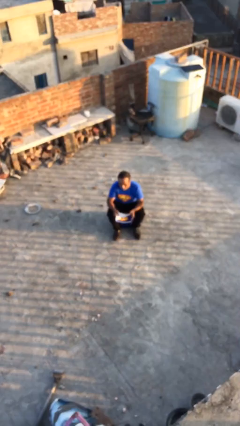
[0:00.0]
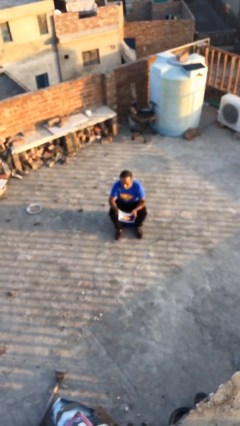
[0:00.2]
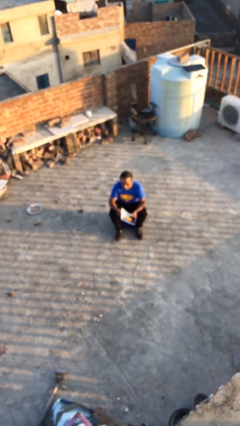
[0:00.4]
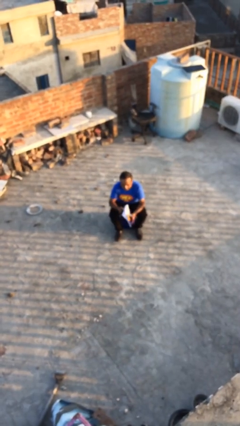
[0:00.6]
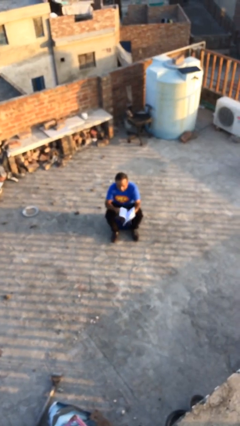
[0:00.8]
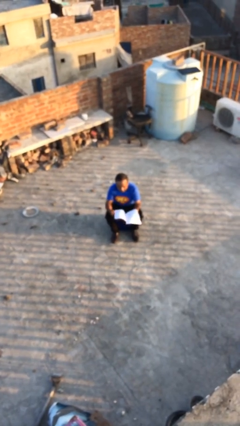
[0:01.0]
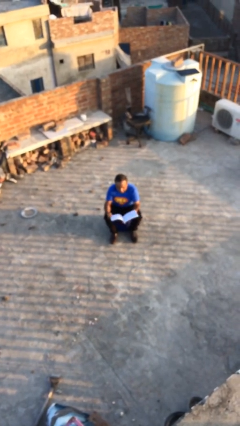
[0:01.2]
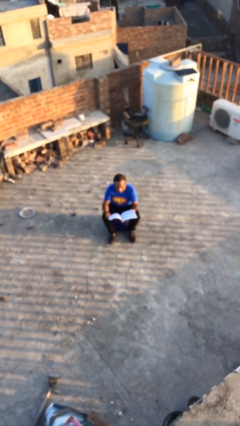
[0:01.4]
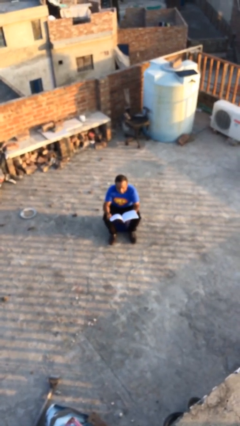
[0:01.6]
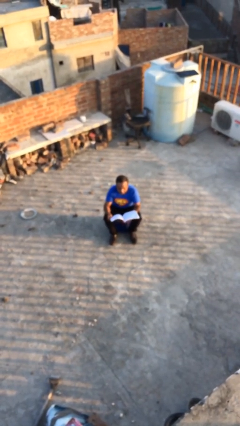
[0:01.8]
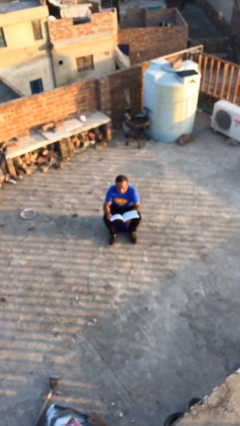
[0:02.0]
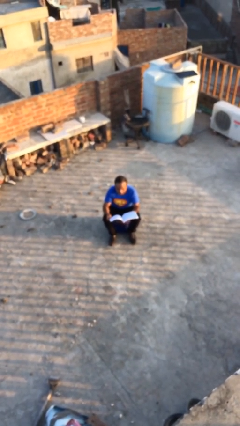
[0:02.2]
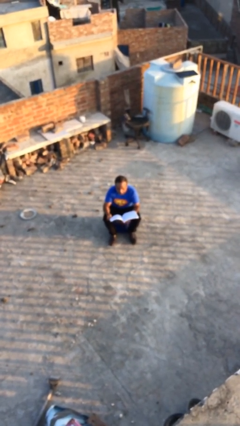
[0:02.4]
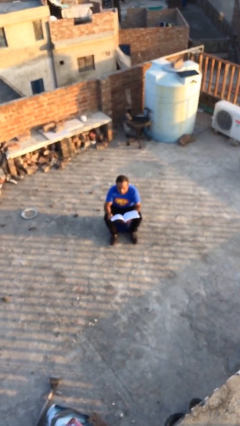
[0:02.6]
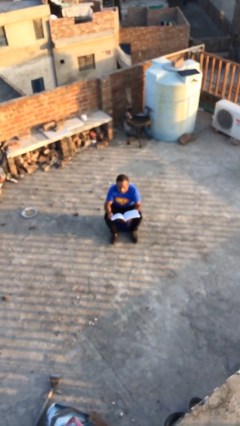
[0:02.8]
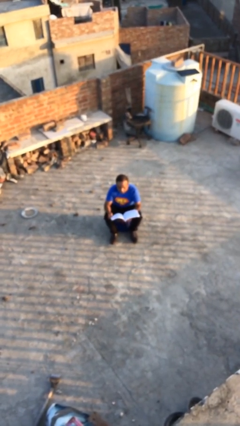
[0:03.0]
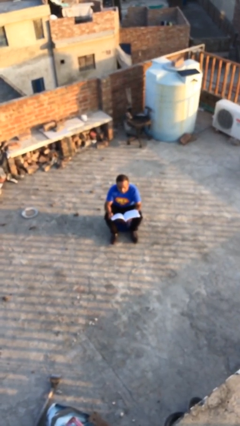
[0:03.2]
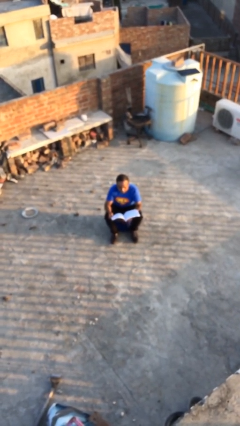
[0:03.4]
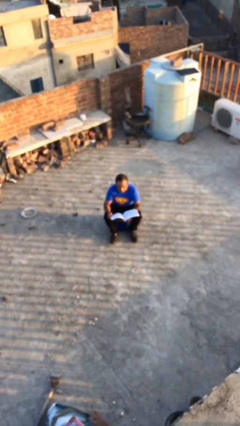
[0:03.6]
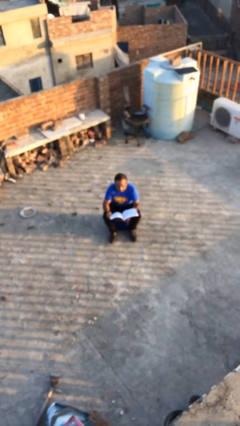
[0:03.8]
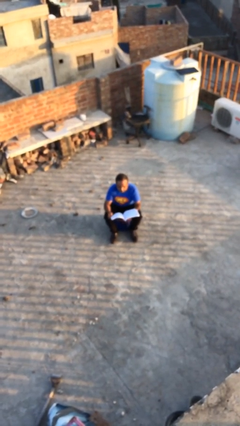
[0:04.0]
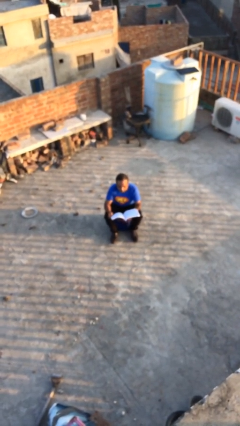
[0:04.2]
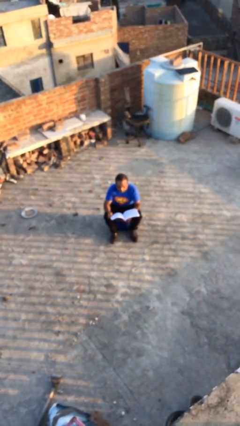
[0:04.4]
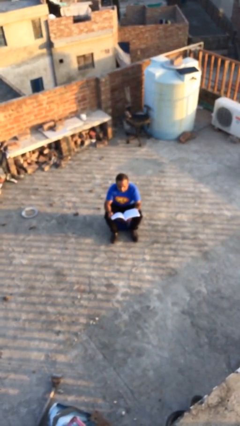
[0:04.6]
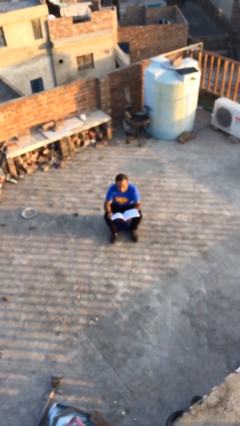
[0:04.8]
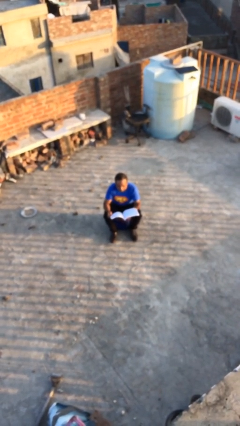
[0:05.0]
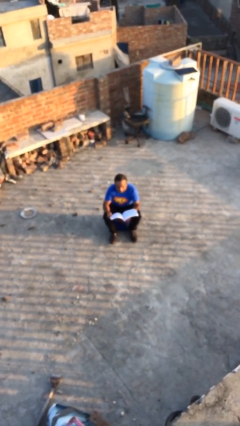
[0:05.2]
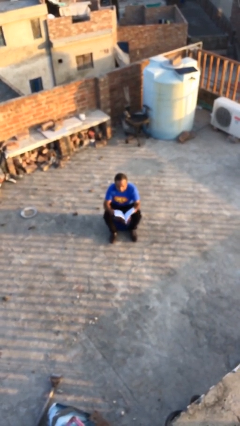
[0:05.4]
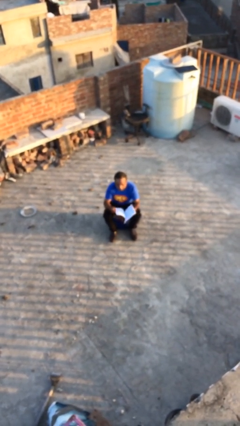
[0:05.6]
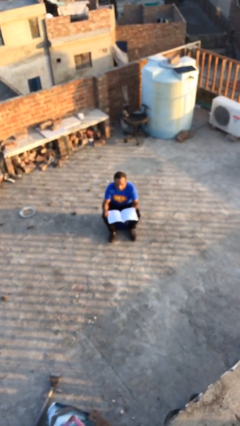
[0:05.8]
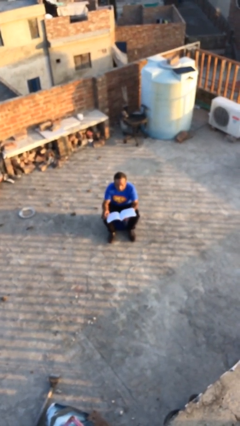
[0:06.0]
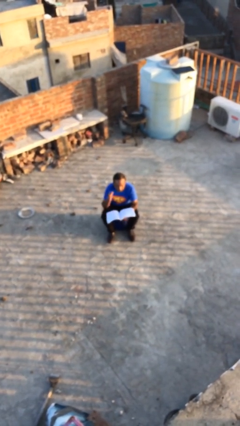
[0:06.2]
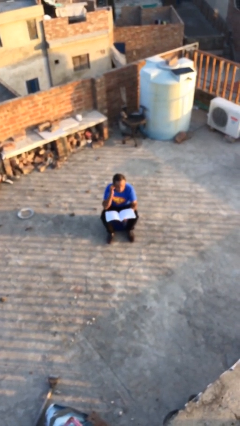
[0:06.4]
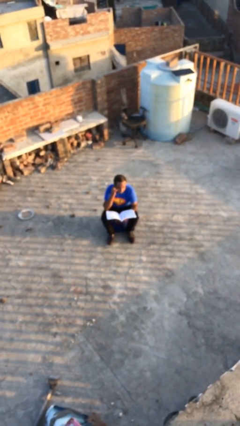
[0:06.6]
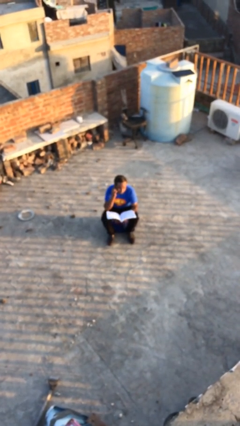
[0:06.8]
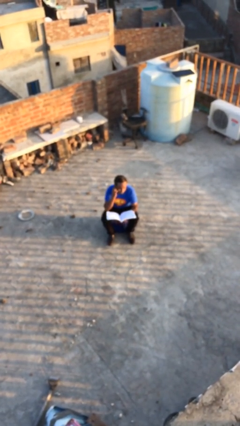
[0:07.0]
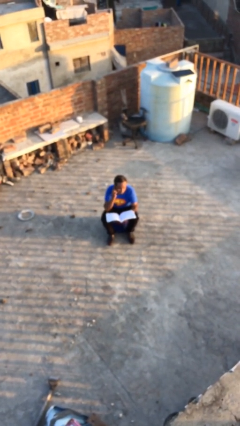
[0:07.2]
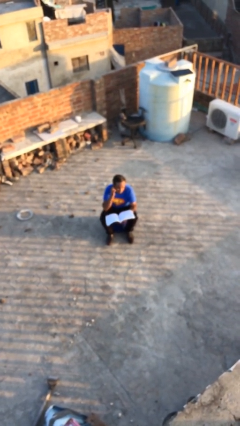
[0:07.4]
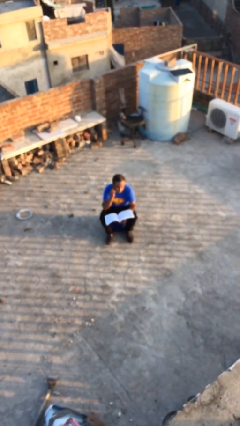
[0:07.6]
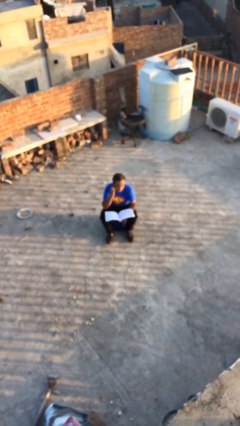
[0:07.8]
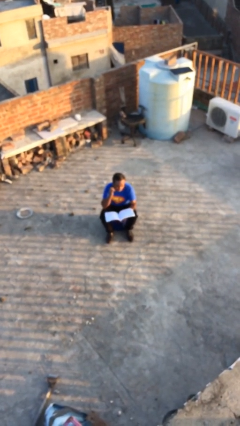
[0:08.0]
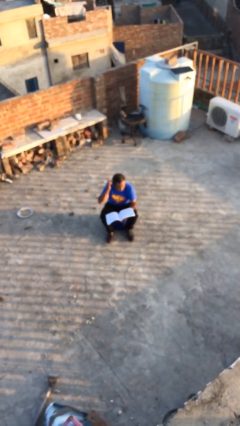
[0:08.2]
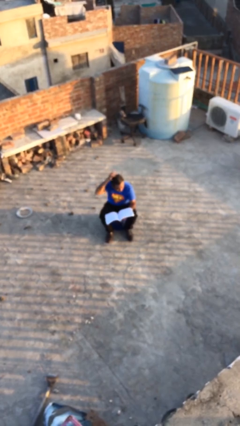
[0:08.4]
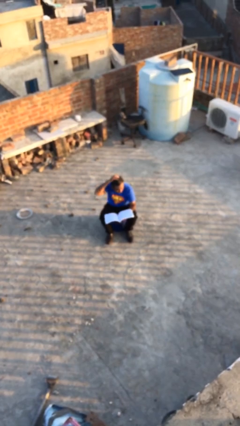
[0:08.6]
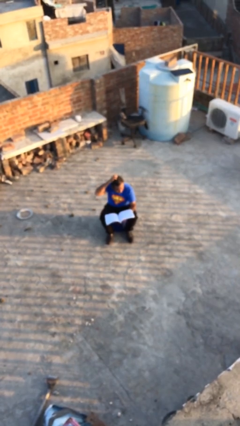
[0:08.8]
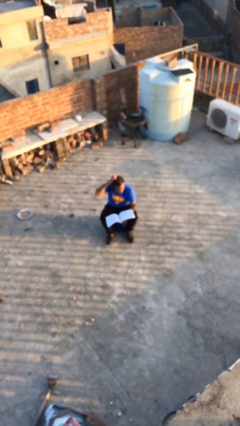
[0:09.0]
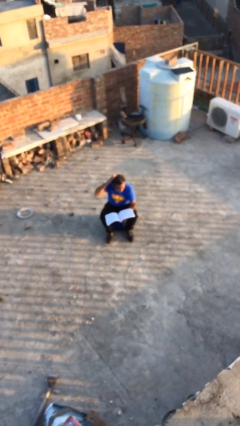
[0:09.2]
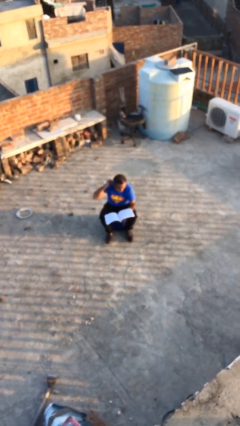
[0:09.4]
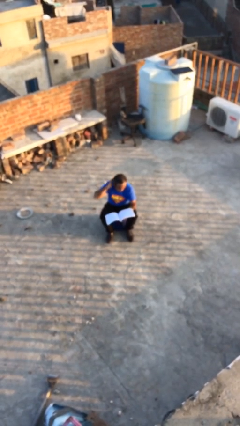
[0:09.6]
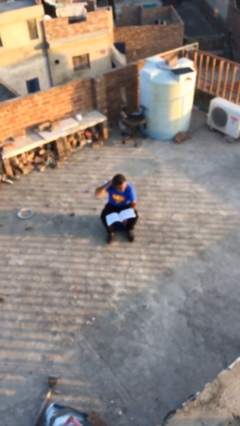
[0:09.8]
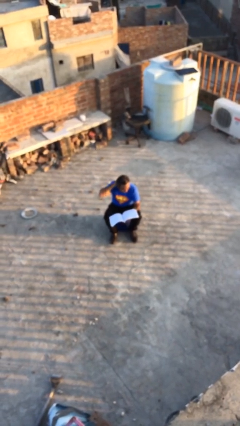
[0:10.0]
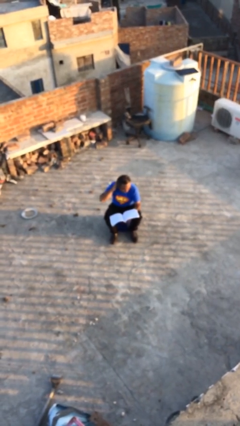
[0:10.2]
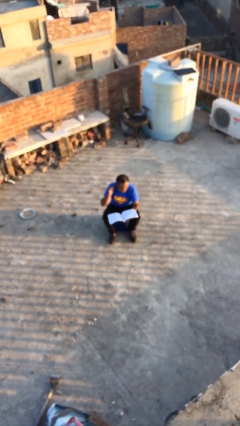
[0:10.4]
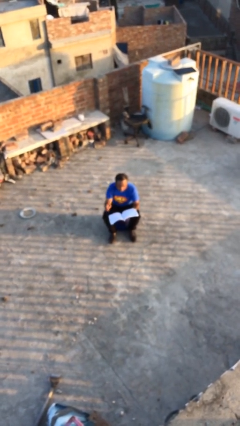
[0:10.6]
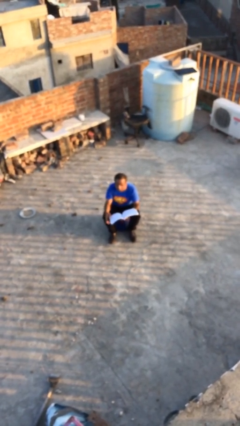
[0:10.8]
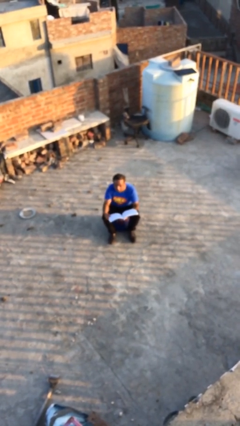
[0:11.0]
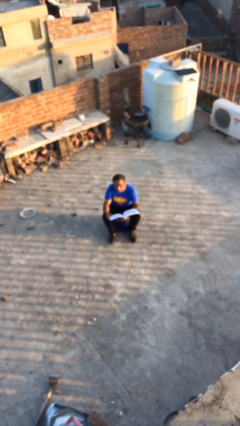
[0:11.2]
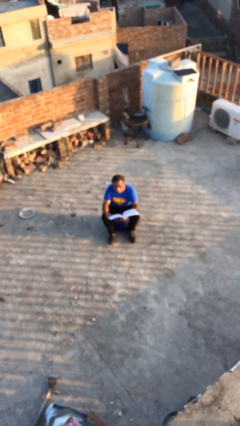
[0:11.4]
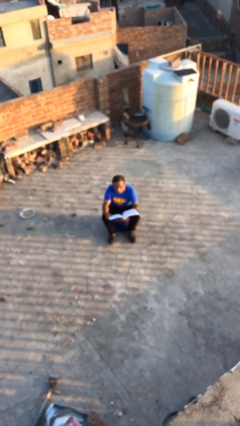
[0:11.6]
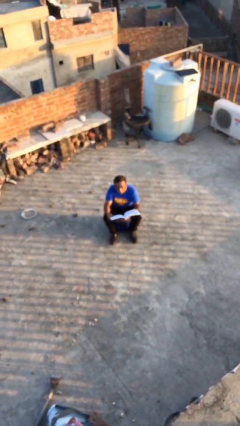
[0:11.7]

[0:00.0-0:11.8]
person reads document

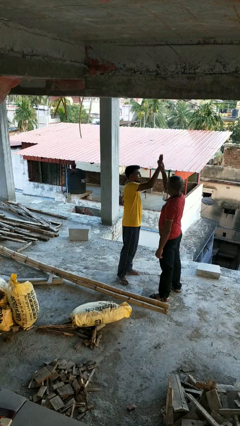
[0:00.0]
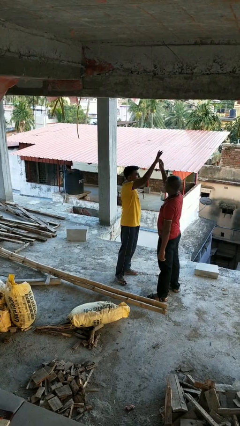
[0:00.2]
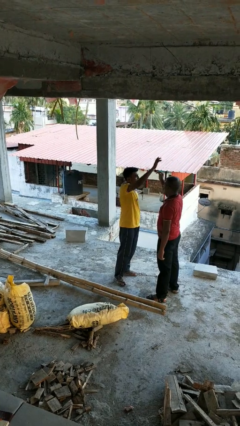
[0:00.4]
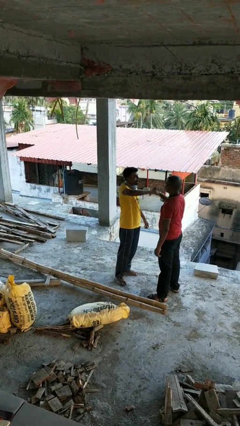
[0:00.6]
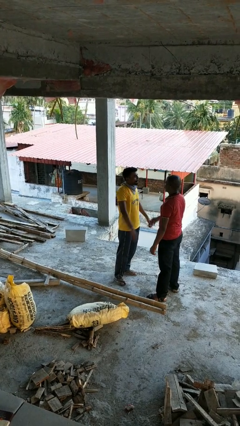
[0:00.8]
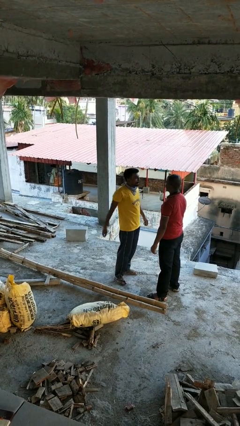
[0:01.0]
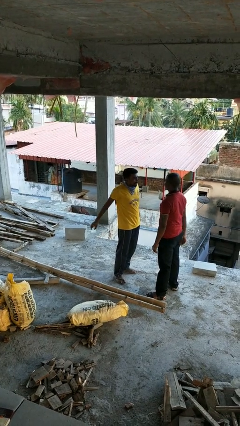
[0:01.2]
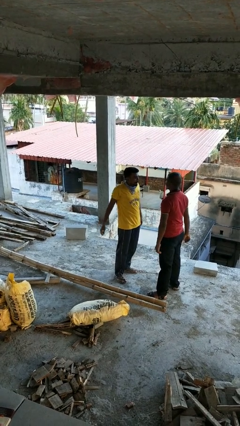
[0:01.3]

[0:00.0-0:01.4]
person highfives hand

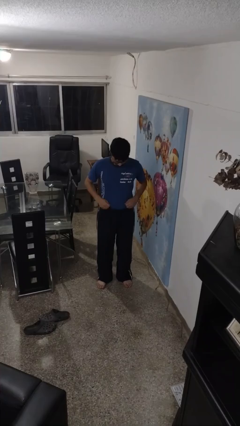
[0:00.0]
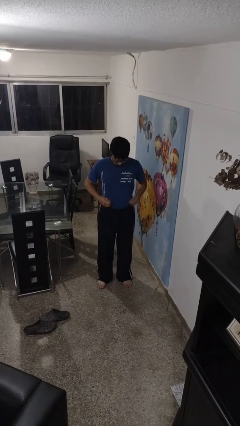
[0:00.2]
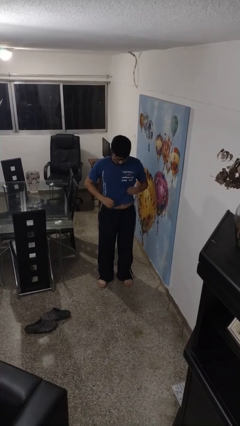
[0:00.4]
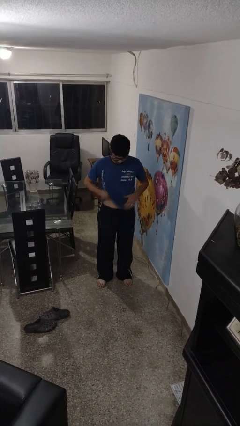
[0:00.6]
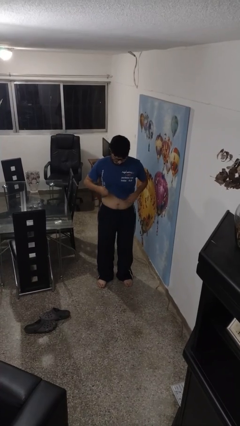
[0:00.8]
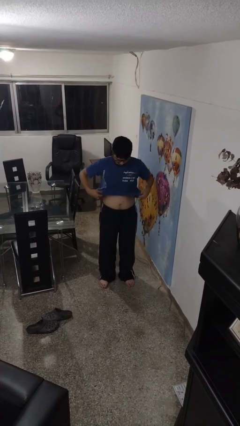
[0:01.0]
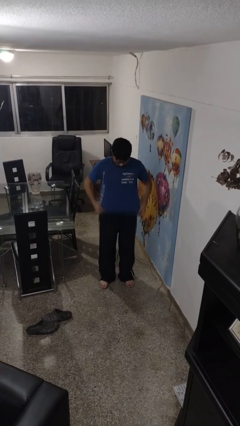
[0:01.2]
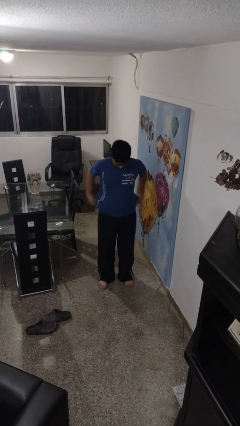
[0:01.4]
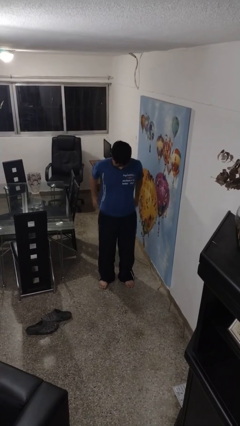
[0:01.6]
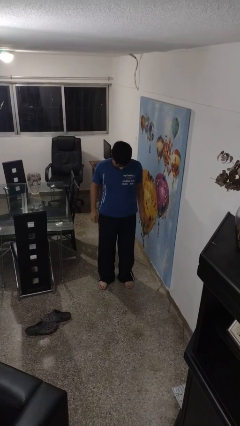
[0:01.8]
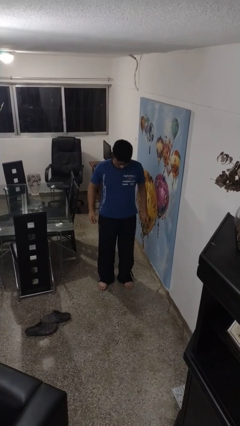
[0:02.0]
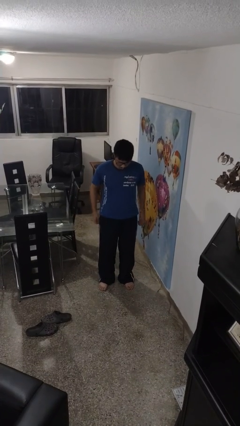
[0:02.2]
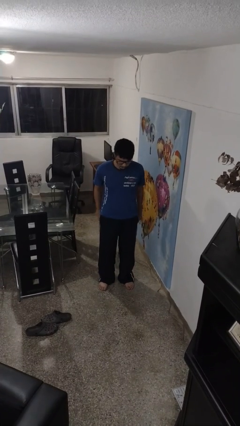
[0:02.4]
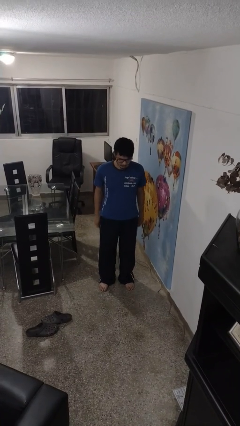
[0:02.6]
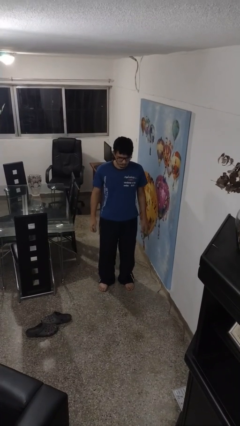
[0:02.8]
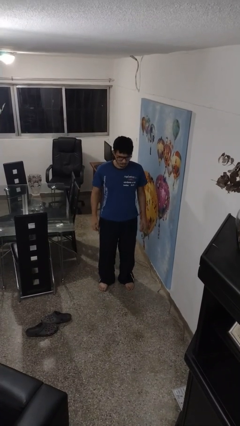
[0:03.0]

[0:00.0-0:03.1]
person untucks shirt

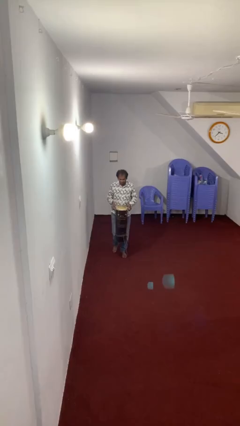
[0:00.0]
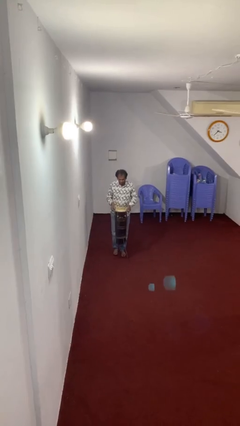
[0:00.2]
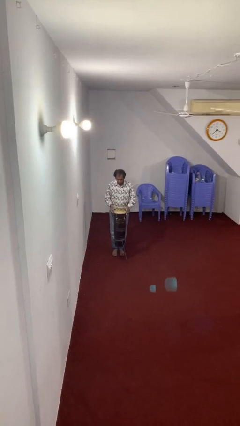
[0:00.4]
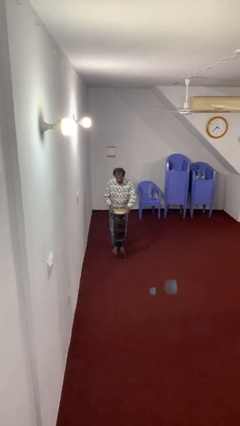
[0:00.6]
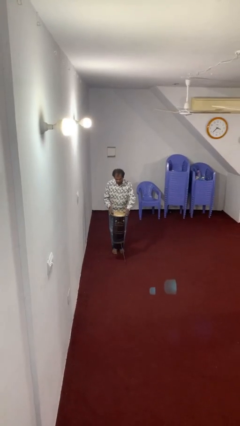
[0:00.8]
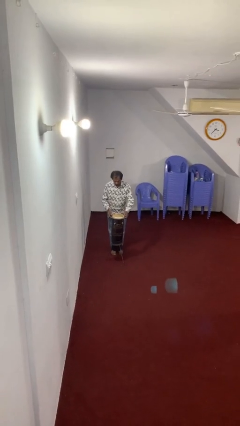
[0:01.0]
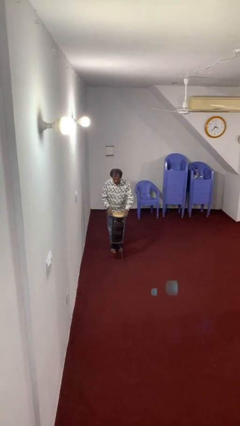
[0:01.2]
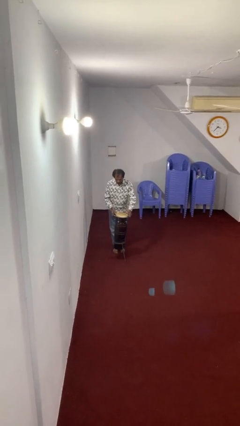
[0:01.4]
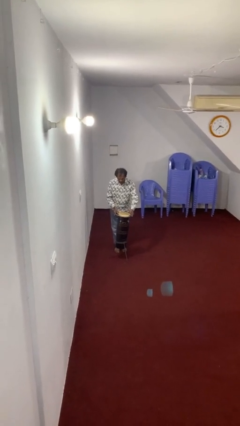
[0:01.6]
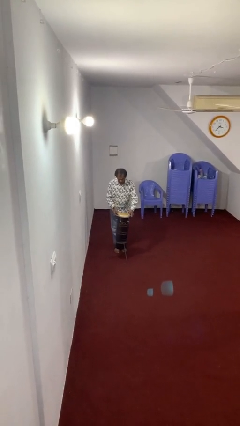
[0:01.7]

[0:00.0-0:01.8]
person puts down object on floor
